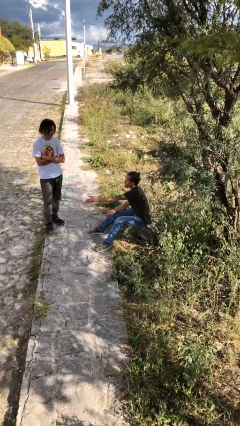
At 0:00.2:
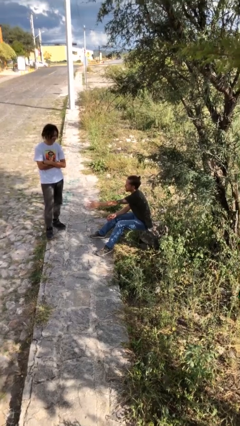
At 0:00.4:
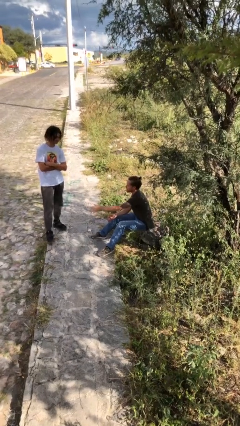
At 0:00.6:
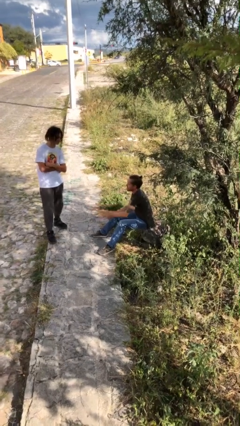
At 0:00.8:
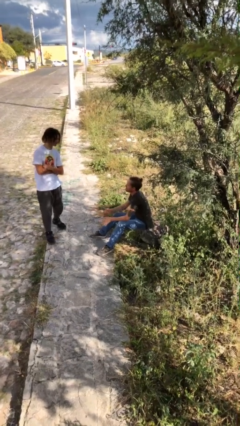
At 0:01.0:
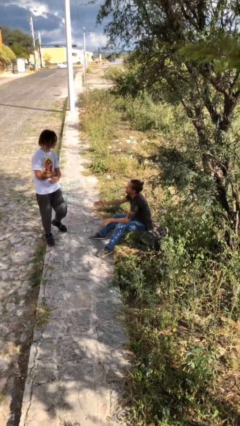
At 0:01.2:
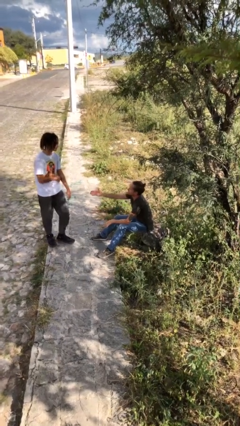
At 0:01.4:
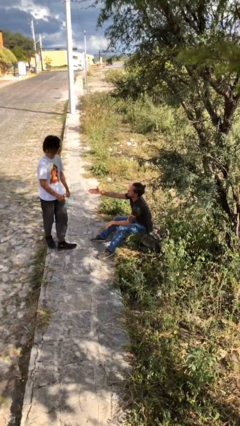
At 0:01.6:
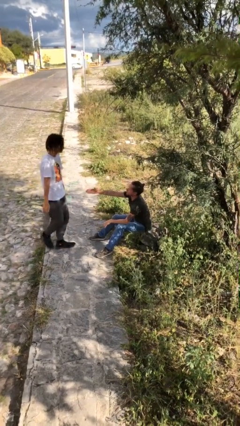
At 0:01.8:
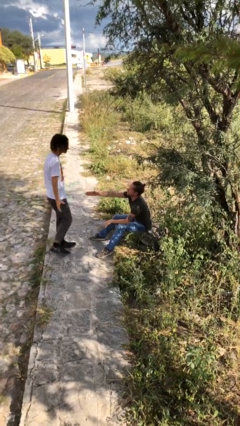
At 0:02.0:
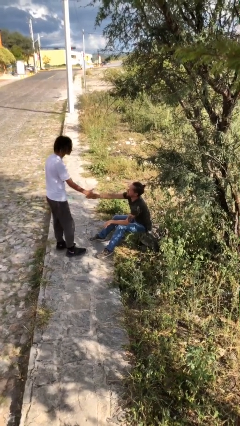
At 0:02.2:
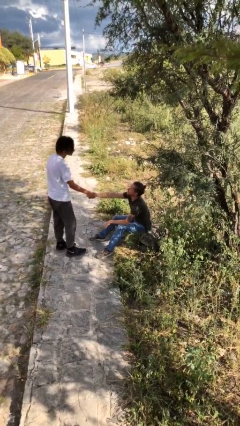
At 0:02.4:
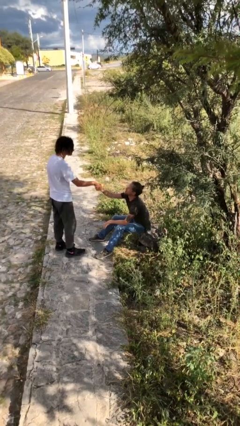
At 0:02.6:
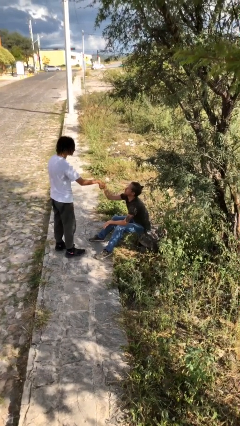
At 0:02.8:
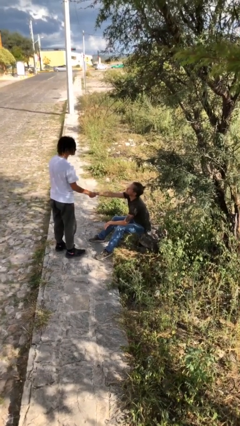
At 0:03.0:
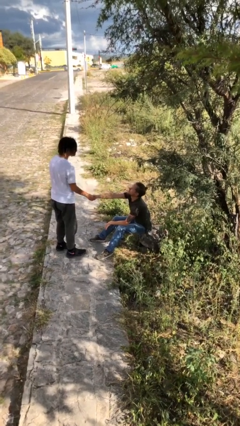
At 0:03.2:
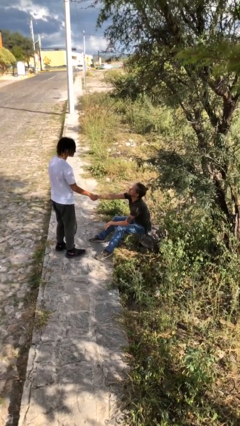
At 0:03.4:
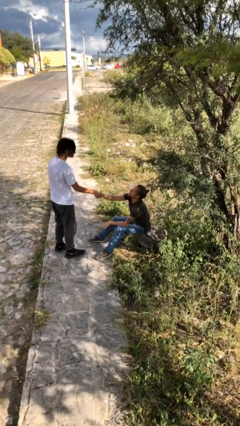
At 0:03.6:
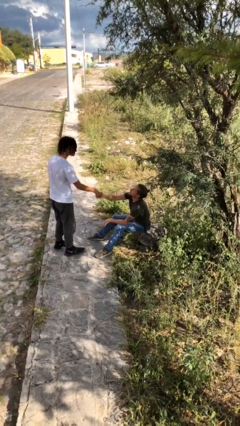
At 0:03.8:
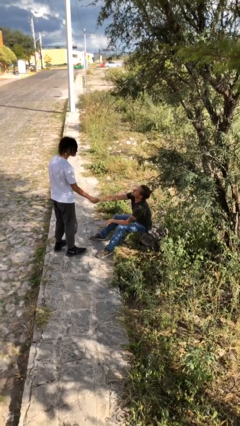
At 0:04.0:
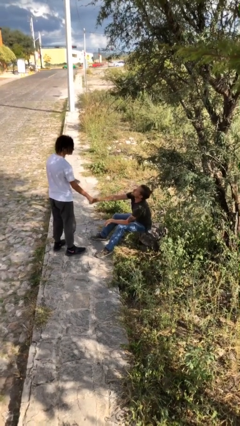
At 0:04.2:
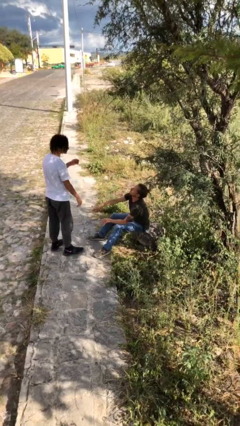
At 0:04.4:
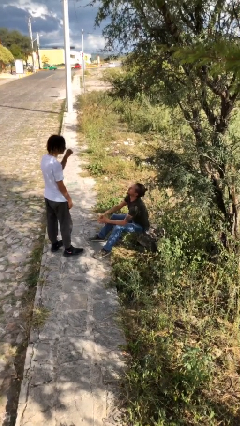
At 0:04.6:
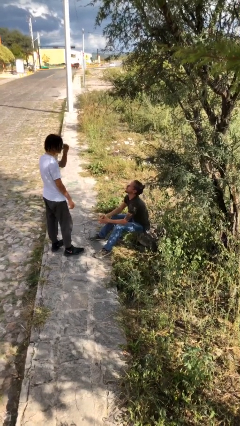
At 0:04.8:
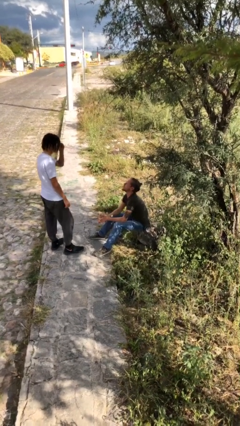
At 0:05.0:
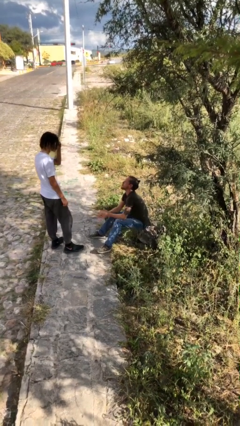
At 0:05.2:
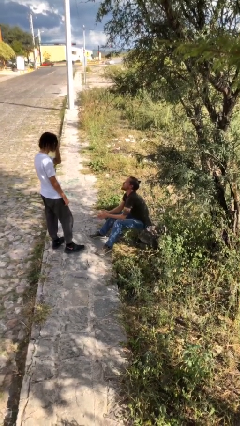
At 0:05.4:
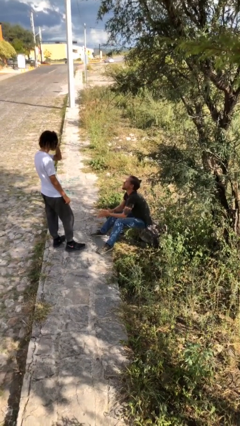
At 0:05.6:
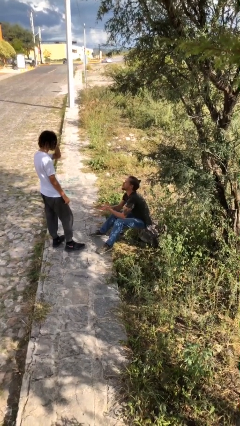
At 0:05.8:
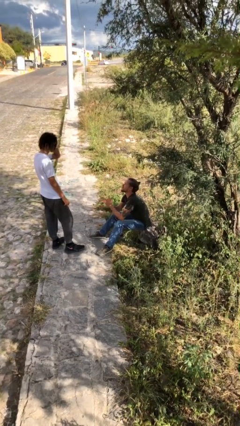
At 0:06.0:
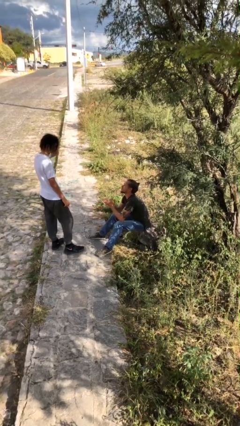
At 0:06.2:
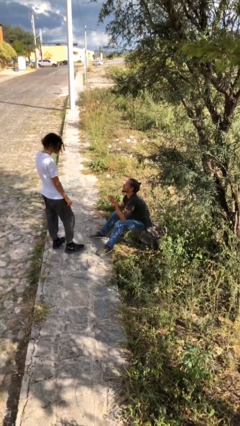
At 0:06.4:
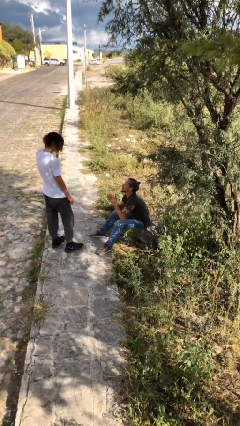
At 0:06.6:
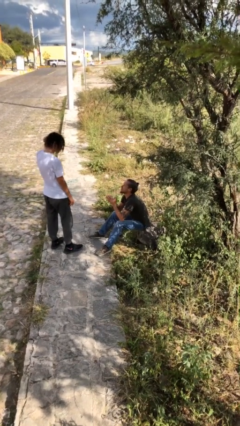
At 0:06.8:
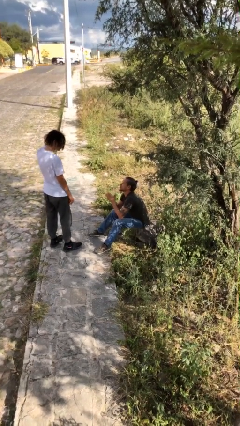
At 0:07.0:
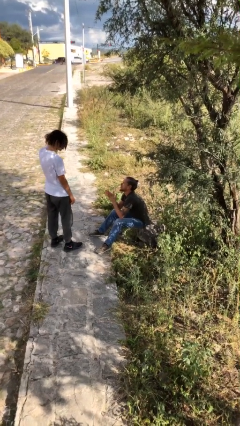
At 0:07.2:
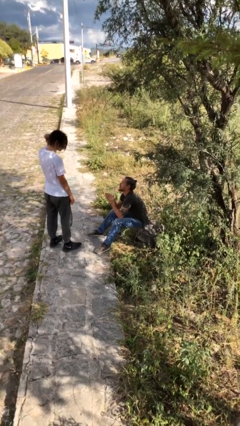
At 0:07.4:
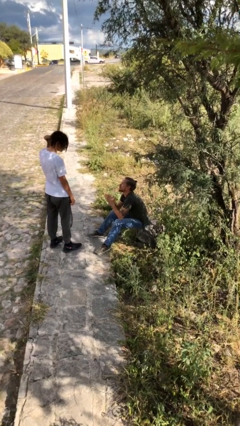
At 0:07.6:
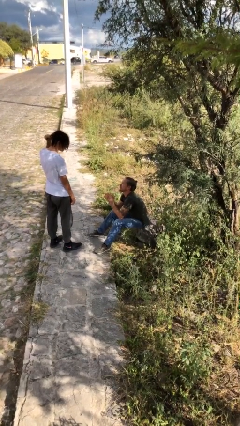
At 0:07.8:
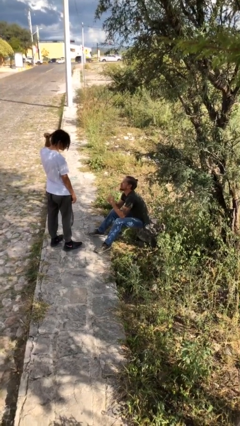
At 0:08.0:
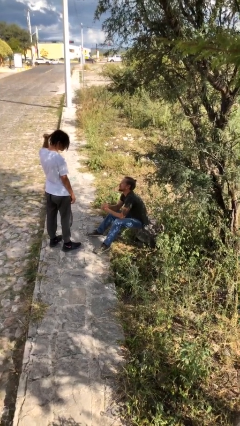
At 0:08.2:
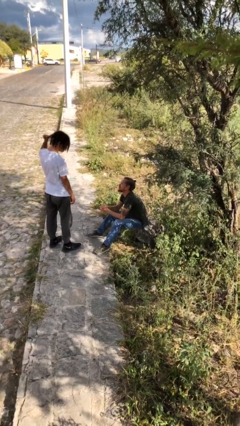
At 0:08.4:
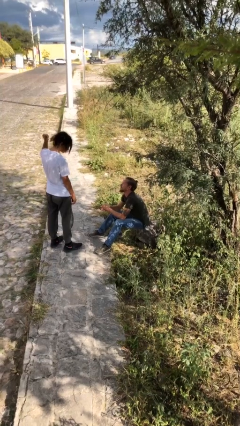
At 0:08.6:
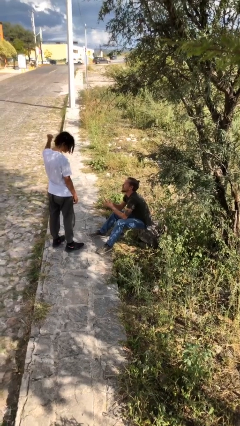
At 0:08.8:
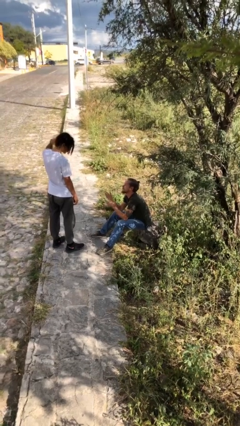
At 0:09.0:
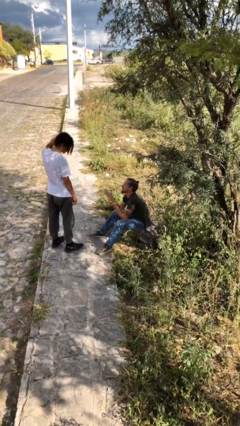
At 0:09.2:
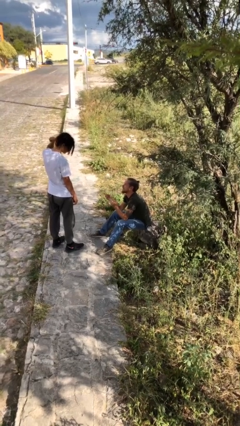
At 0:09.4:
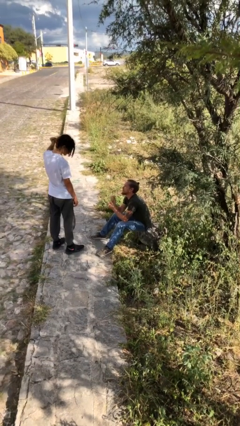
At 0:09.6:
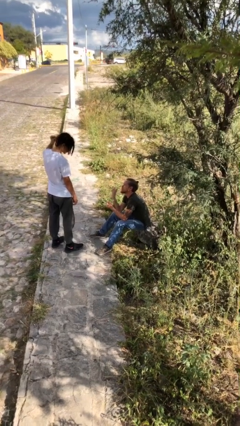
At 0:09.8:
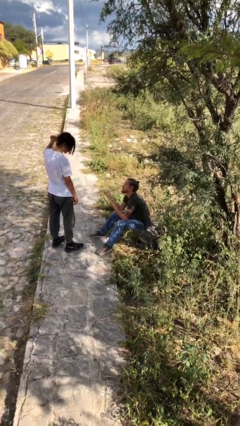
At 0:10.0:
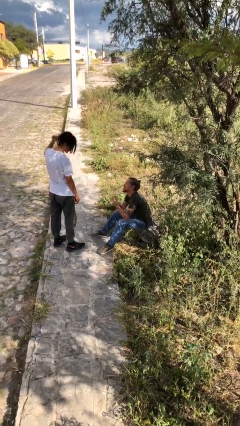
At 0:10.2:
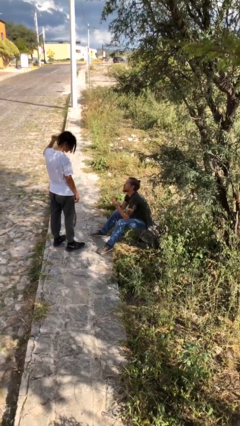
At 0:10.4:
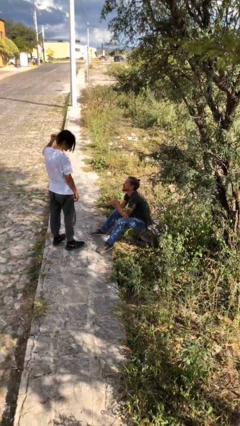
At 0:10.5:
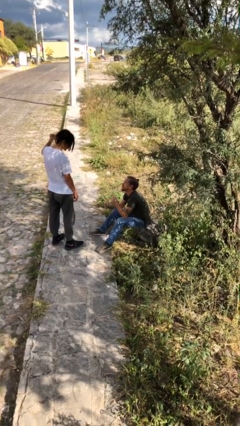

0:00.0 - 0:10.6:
person shakes hand

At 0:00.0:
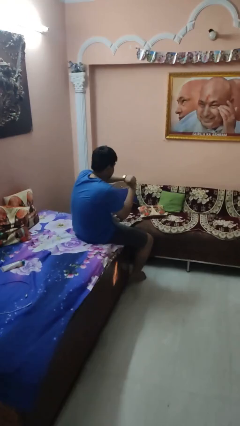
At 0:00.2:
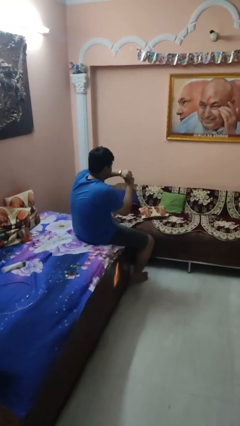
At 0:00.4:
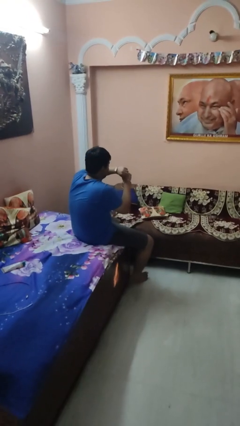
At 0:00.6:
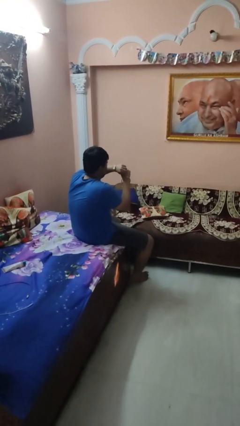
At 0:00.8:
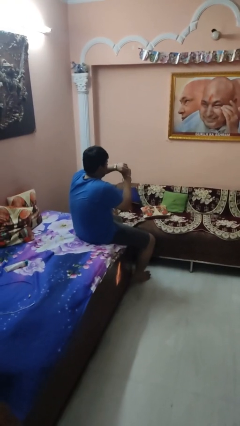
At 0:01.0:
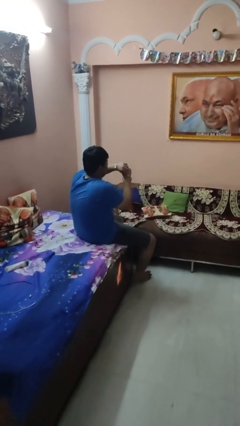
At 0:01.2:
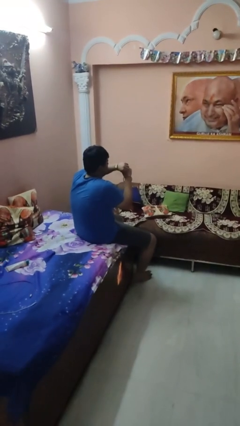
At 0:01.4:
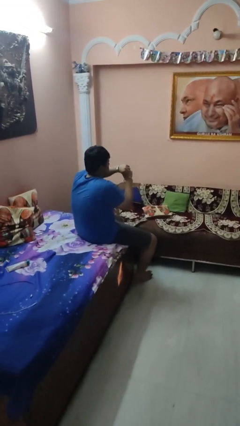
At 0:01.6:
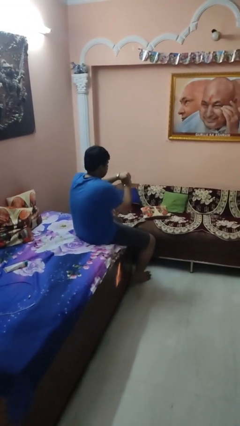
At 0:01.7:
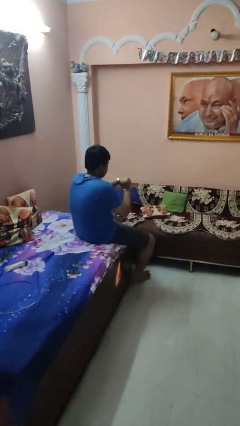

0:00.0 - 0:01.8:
person looks at wristwatch

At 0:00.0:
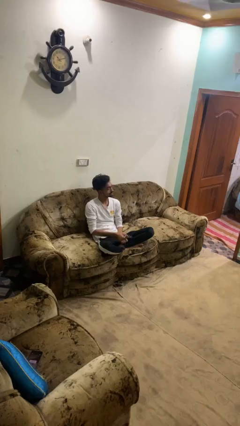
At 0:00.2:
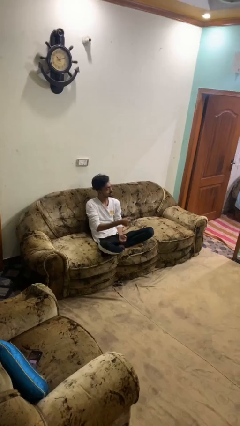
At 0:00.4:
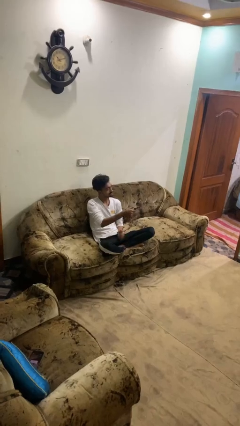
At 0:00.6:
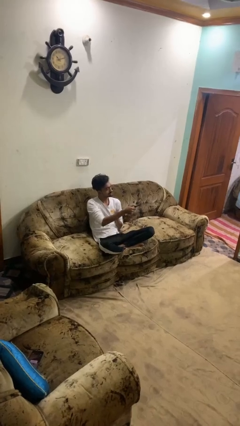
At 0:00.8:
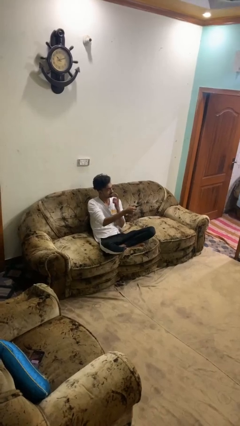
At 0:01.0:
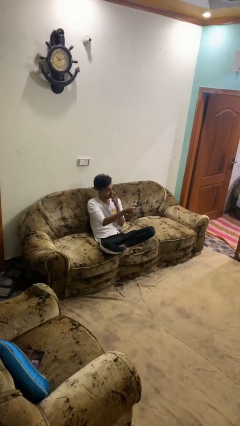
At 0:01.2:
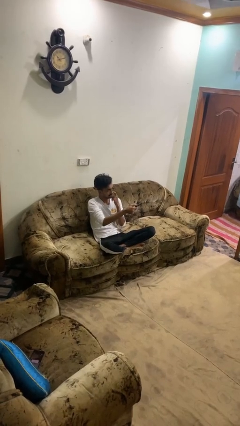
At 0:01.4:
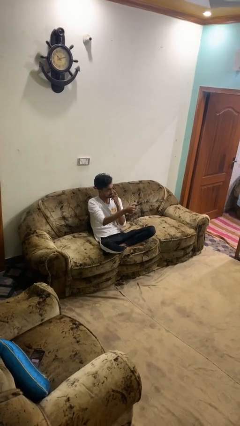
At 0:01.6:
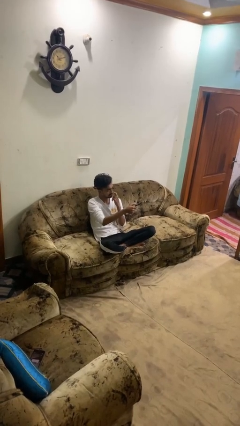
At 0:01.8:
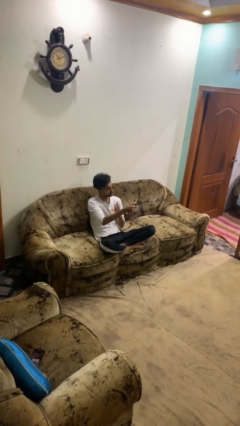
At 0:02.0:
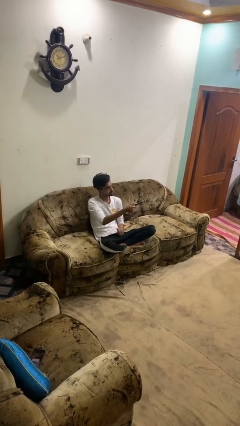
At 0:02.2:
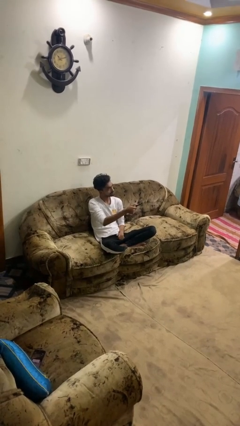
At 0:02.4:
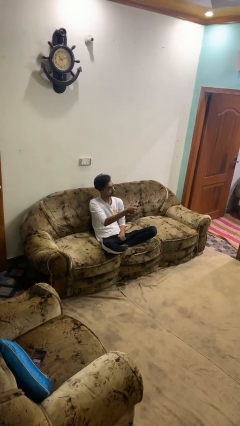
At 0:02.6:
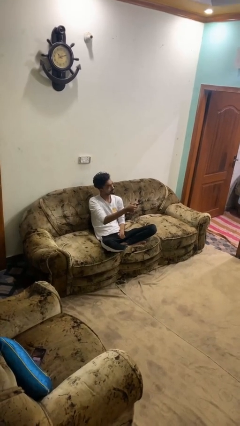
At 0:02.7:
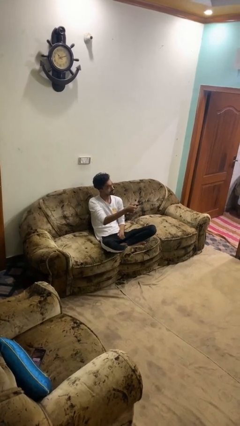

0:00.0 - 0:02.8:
person uses television remote

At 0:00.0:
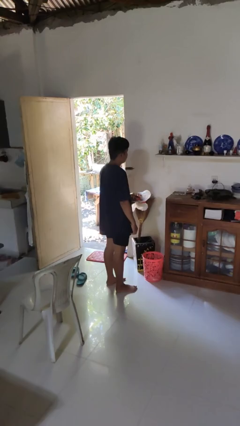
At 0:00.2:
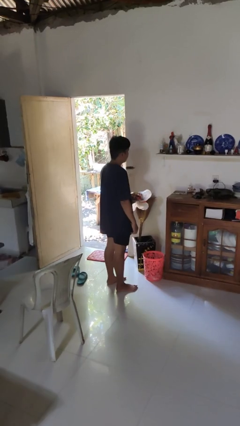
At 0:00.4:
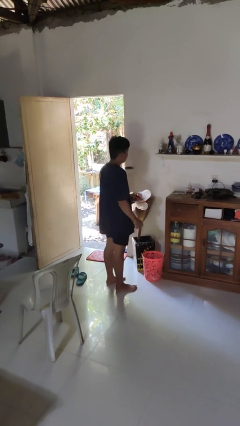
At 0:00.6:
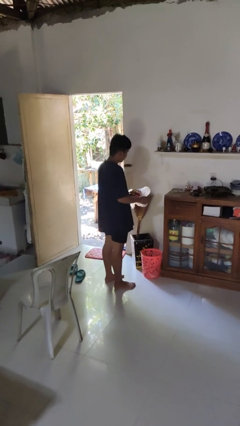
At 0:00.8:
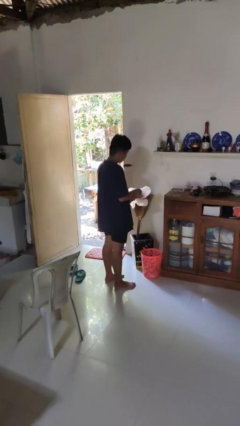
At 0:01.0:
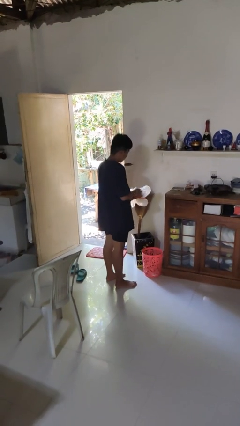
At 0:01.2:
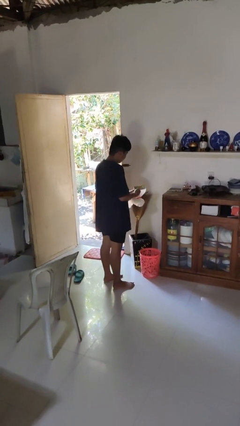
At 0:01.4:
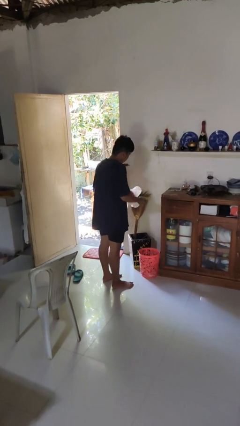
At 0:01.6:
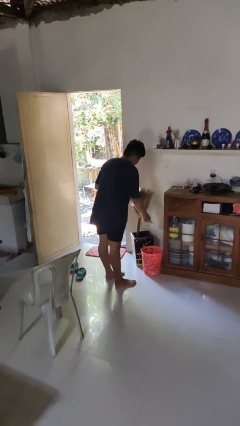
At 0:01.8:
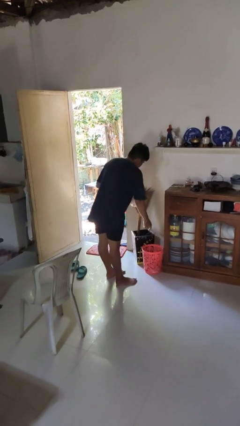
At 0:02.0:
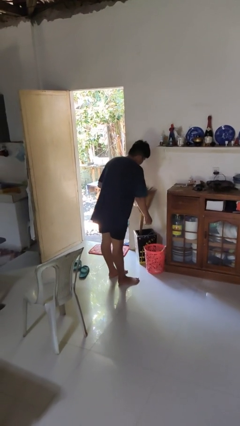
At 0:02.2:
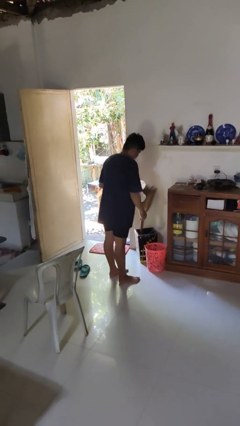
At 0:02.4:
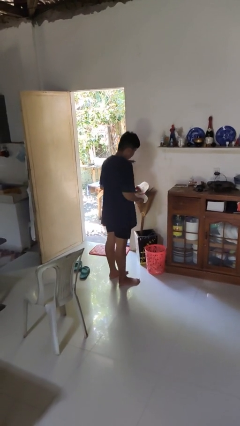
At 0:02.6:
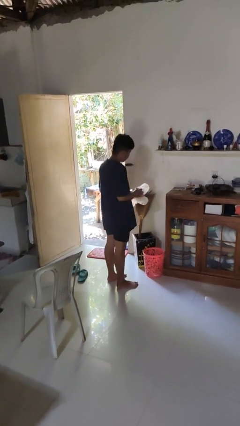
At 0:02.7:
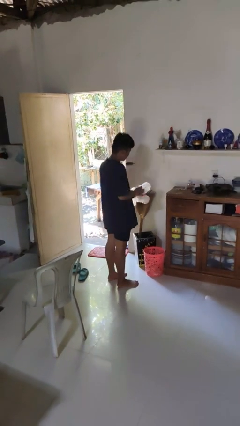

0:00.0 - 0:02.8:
person discards trash
